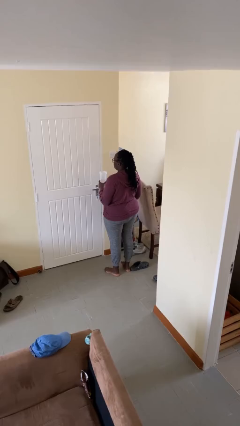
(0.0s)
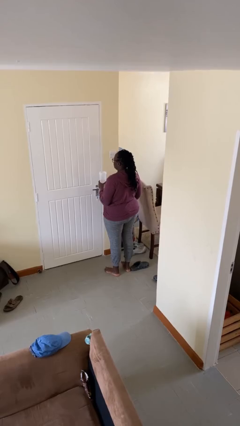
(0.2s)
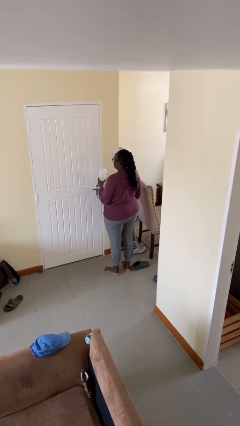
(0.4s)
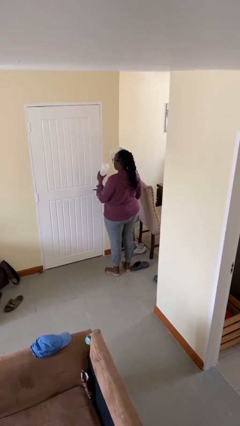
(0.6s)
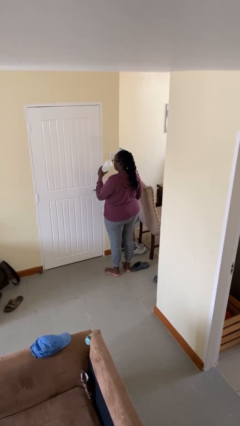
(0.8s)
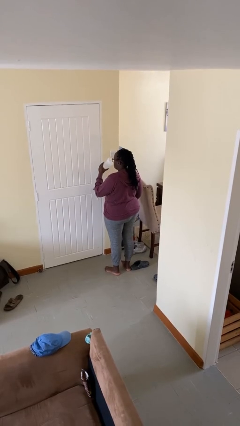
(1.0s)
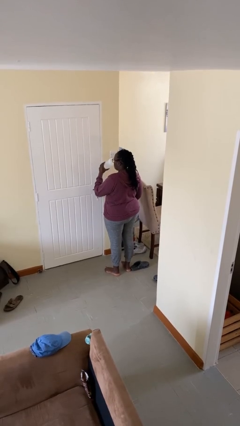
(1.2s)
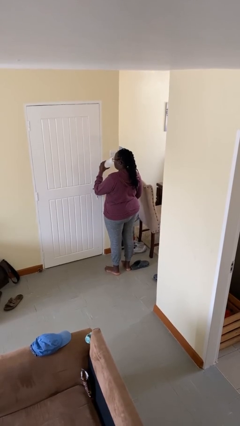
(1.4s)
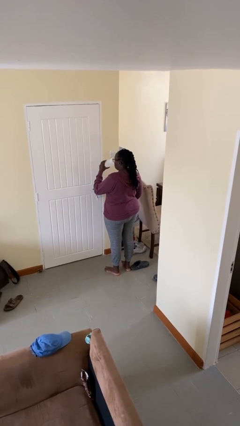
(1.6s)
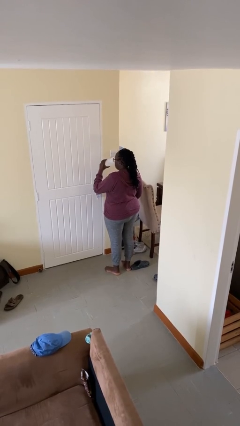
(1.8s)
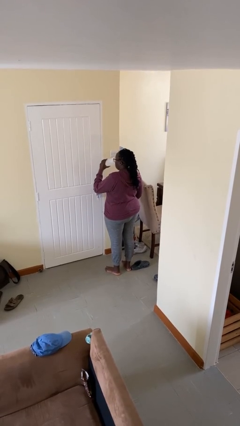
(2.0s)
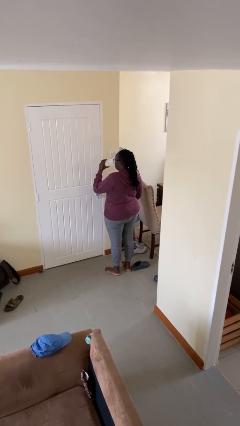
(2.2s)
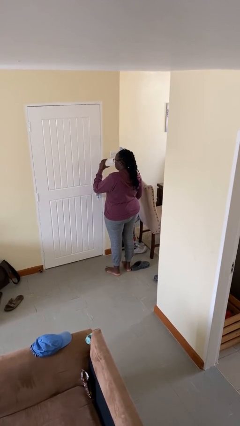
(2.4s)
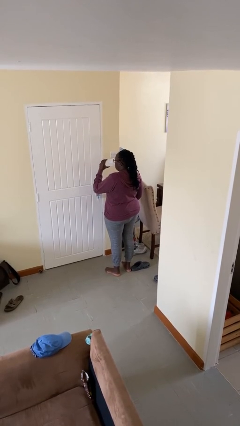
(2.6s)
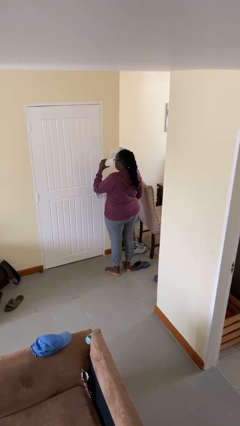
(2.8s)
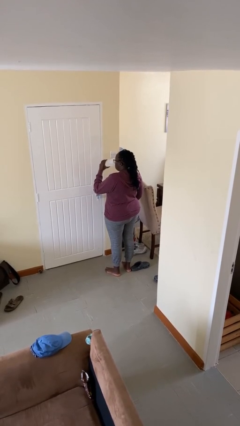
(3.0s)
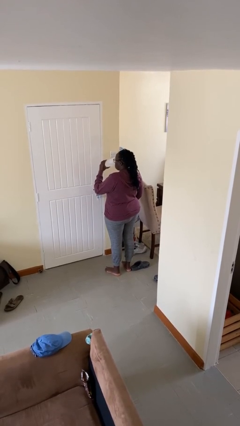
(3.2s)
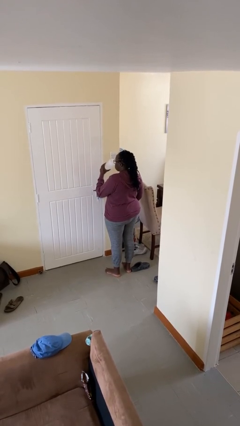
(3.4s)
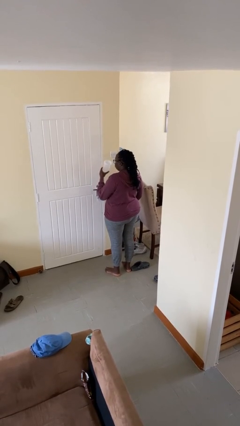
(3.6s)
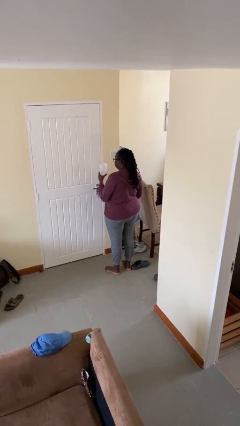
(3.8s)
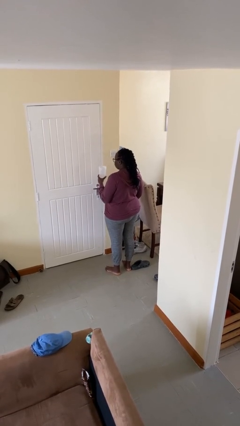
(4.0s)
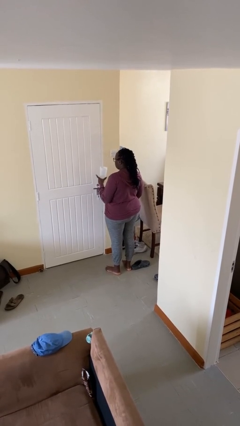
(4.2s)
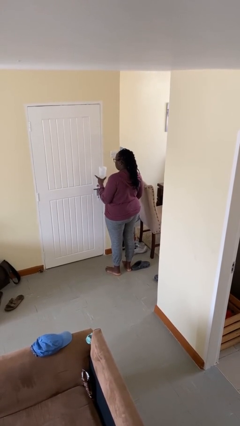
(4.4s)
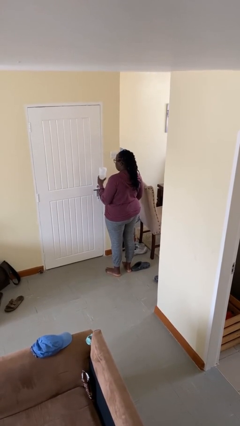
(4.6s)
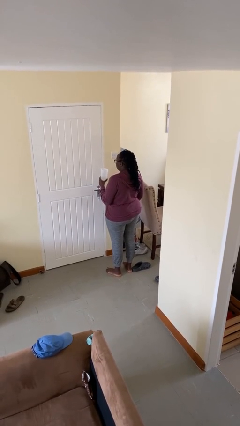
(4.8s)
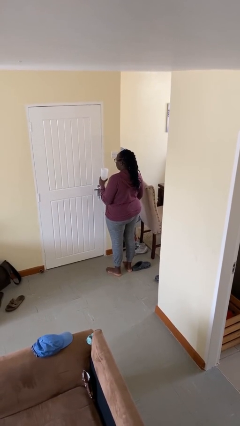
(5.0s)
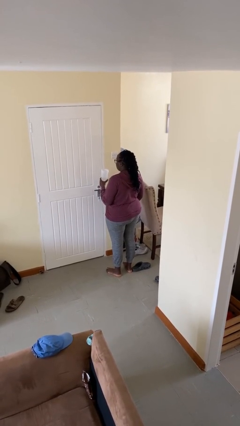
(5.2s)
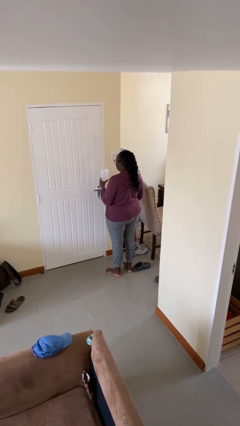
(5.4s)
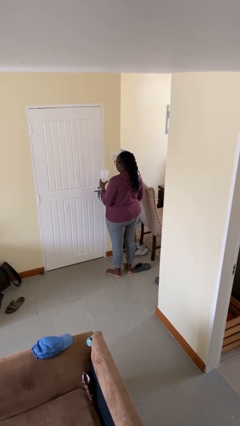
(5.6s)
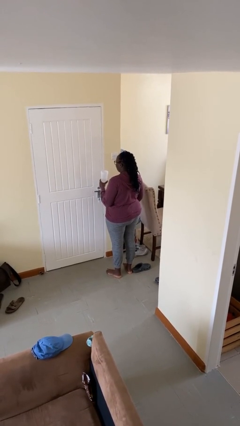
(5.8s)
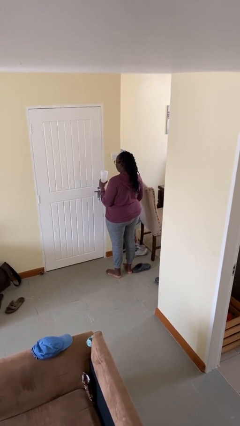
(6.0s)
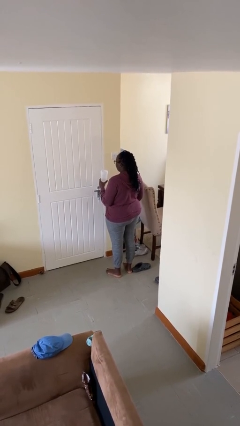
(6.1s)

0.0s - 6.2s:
person drinks from bottle

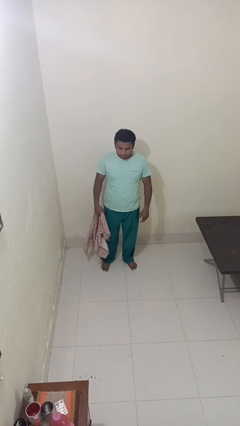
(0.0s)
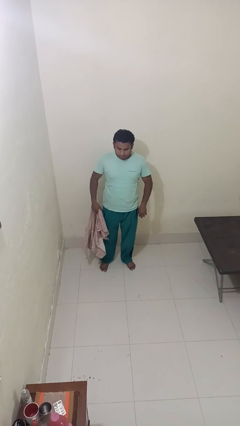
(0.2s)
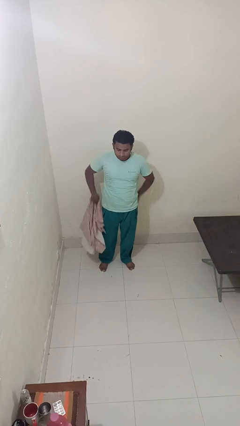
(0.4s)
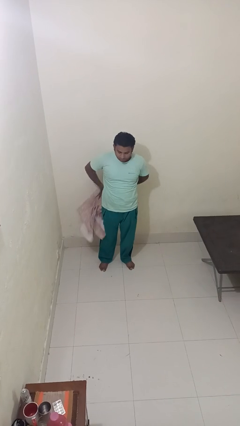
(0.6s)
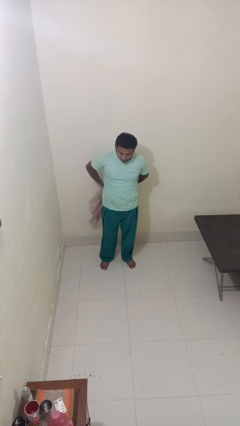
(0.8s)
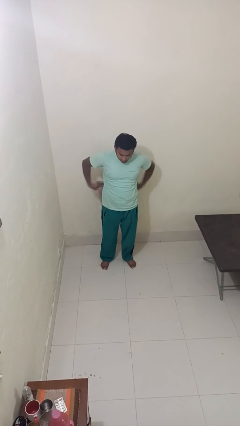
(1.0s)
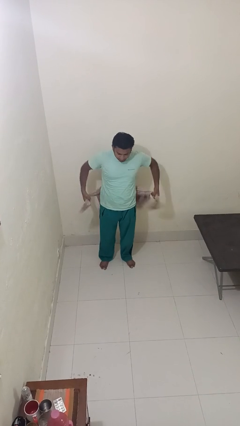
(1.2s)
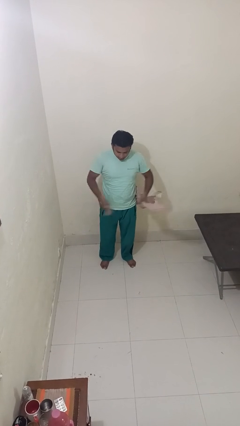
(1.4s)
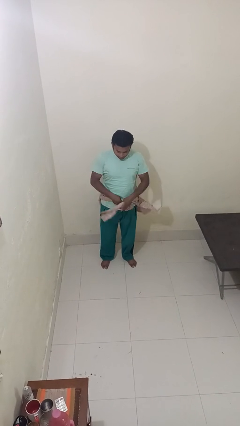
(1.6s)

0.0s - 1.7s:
person ties jacket around waist

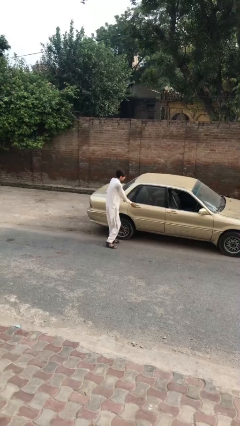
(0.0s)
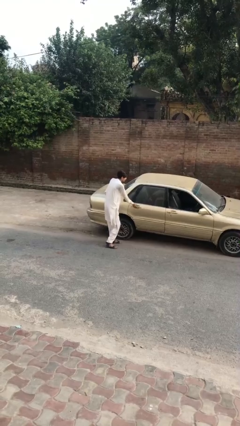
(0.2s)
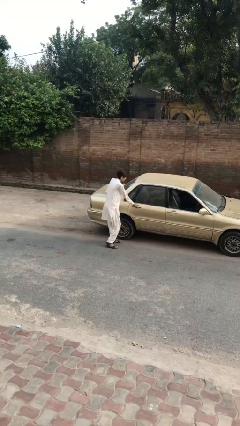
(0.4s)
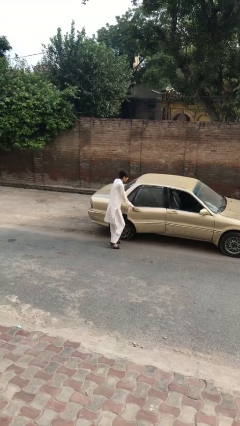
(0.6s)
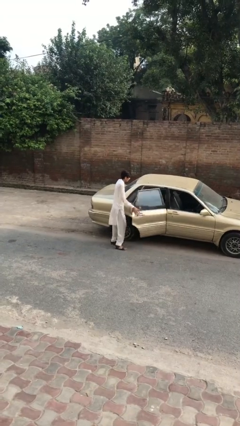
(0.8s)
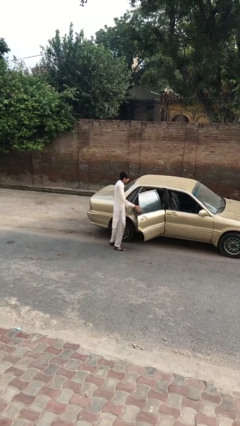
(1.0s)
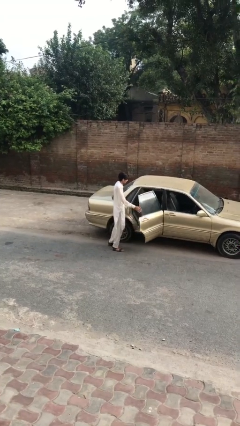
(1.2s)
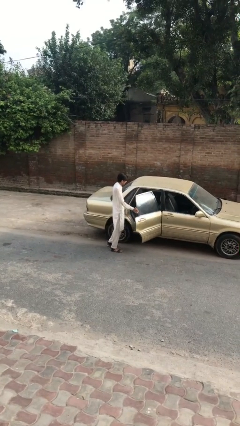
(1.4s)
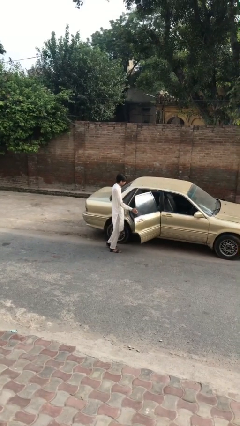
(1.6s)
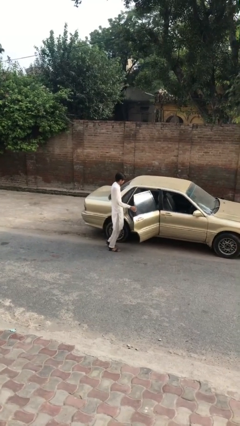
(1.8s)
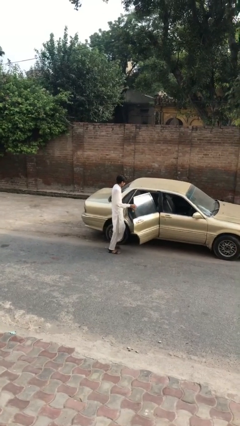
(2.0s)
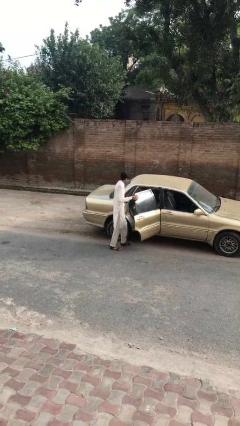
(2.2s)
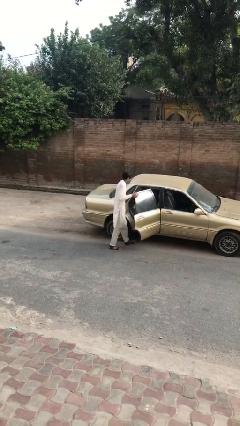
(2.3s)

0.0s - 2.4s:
person opens car door

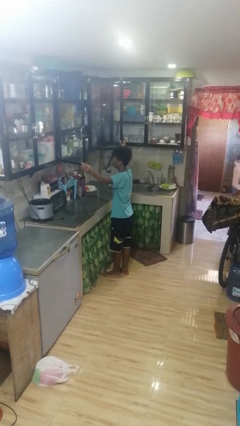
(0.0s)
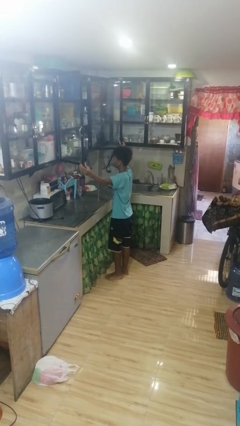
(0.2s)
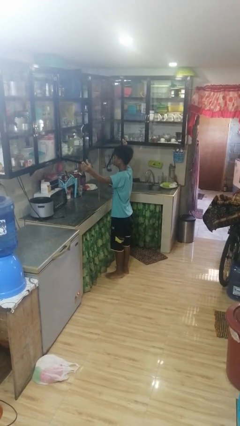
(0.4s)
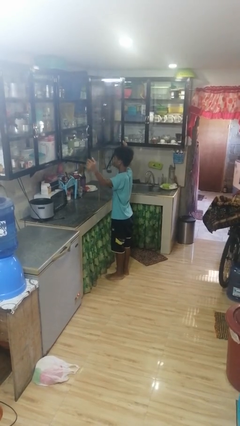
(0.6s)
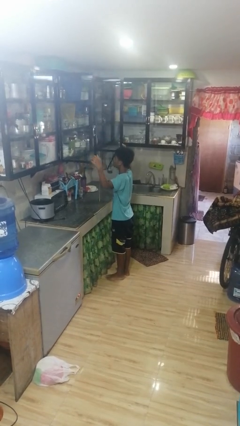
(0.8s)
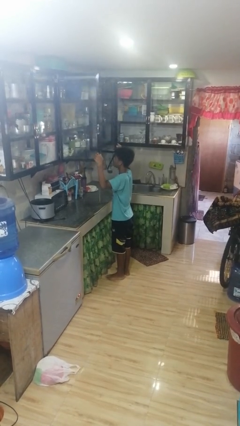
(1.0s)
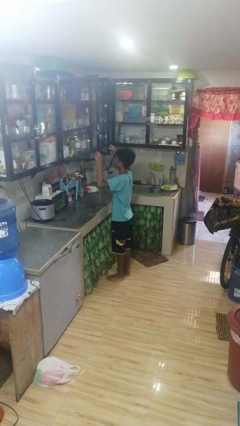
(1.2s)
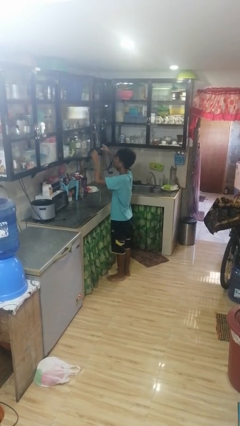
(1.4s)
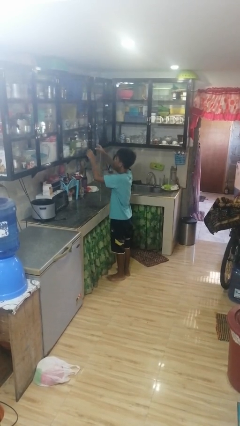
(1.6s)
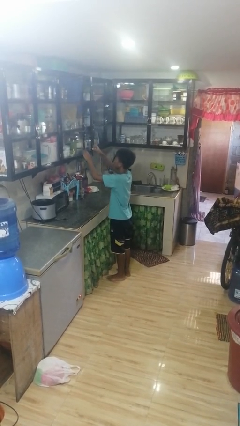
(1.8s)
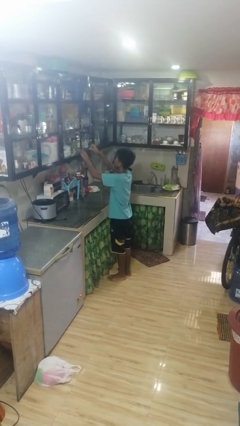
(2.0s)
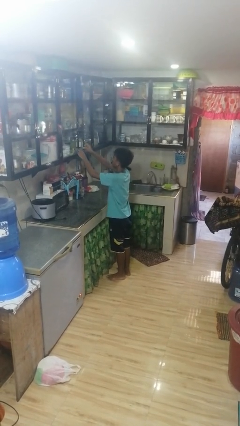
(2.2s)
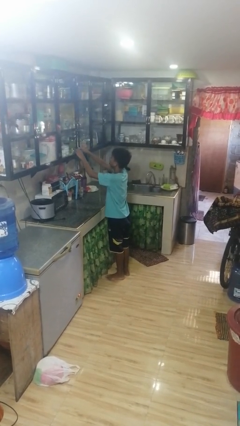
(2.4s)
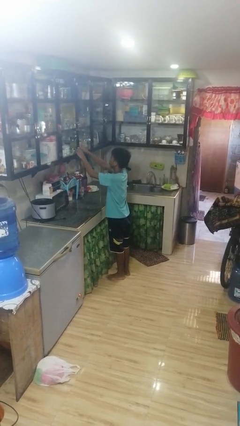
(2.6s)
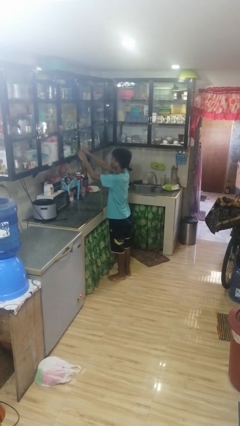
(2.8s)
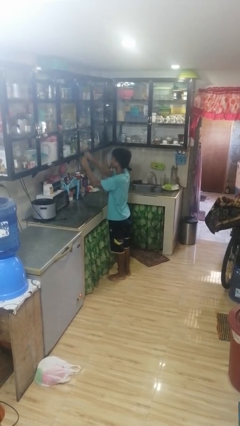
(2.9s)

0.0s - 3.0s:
person closes cabinet

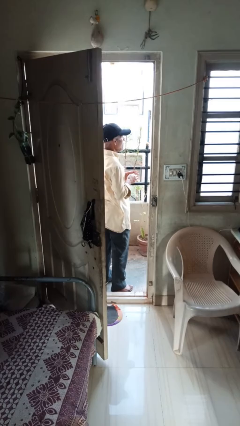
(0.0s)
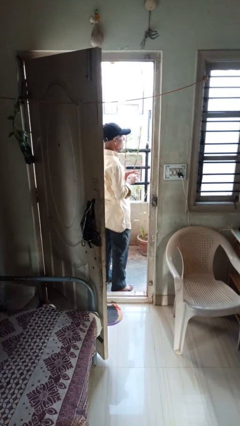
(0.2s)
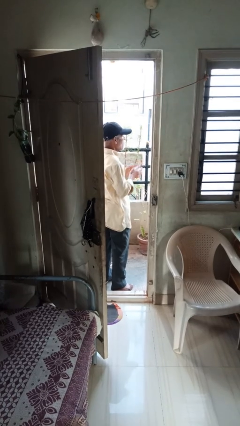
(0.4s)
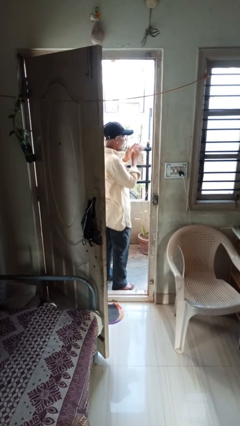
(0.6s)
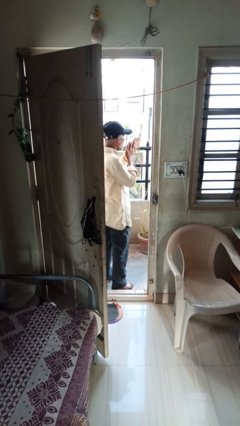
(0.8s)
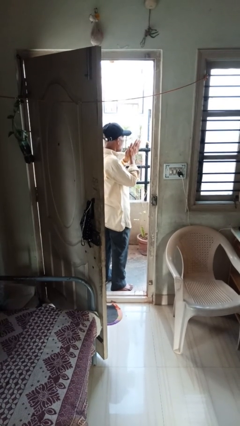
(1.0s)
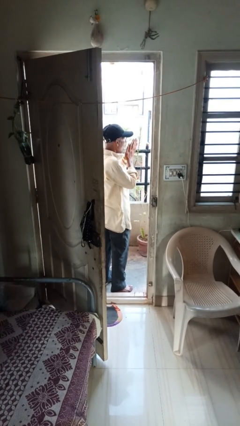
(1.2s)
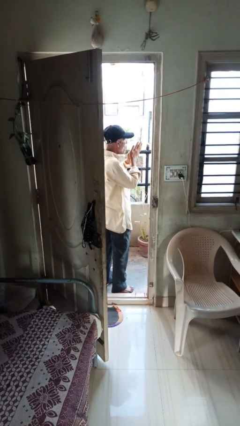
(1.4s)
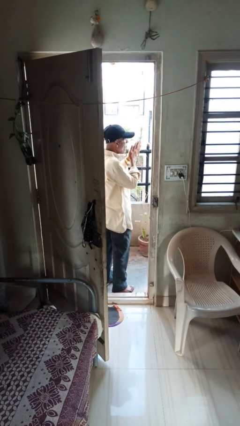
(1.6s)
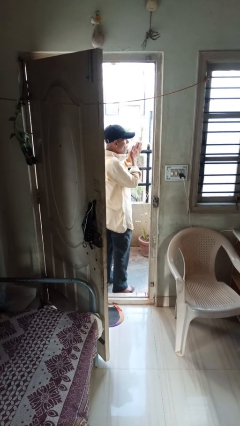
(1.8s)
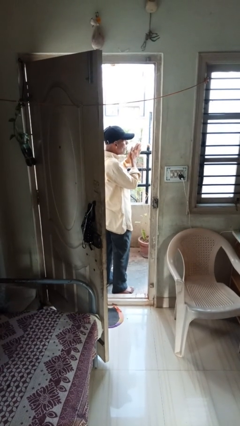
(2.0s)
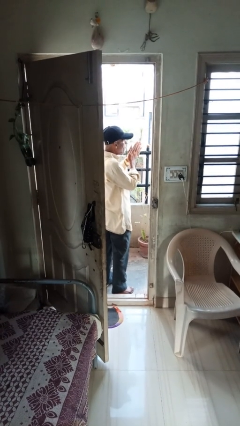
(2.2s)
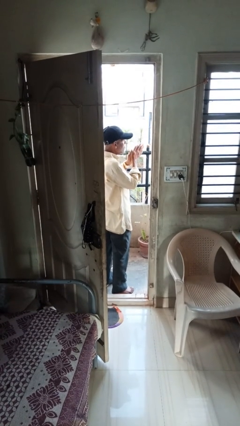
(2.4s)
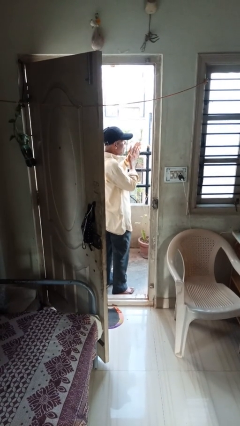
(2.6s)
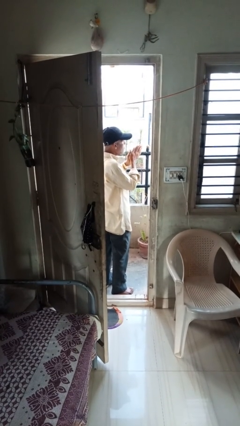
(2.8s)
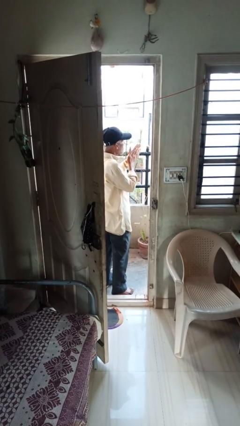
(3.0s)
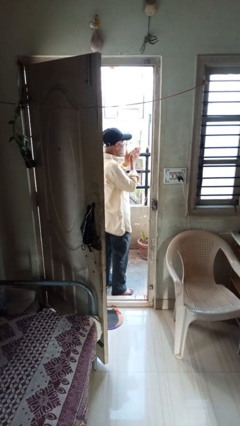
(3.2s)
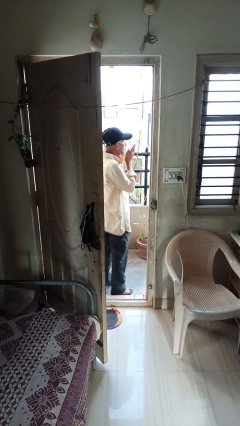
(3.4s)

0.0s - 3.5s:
person blows into hands

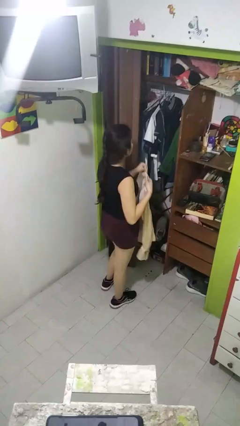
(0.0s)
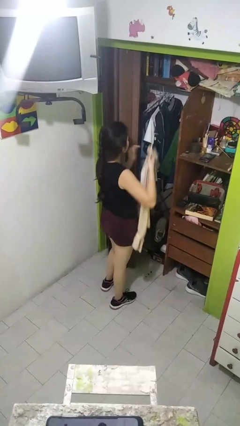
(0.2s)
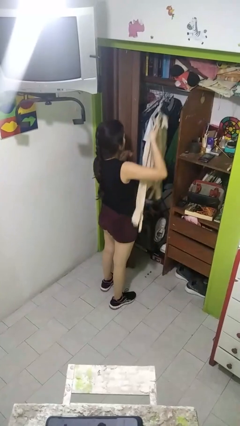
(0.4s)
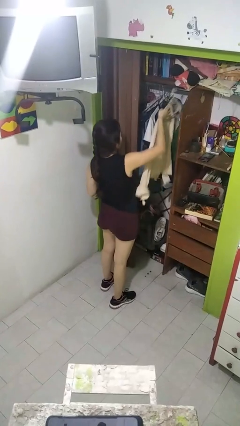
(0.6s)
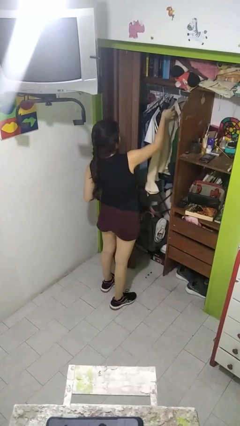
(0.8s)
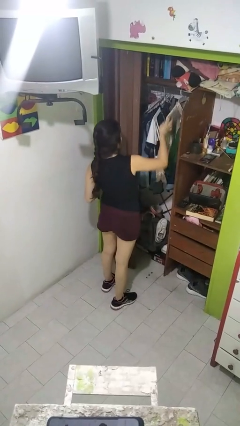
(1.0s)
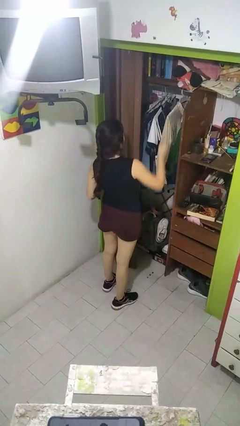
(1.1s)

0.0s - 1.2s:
person puts clothes into closet
